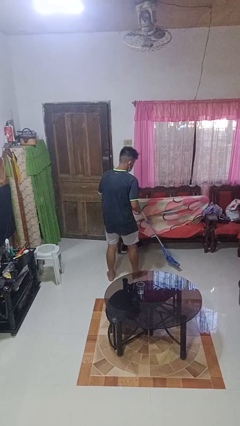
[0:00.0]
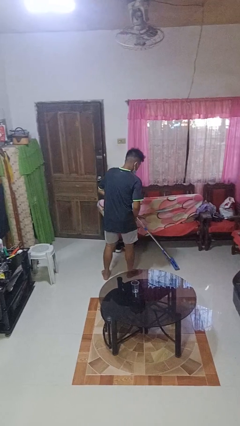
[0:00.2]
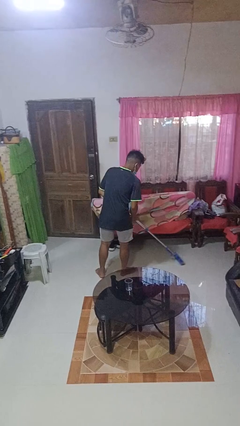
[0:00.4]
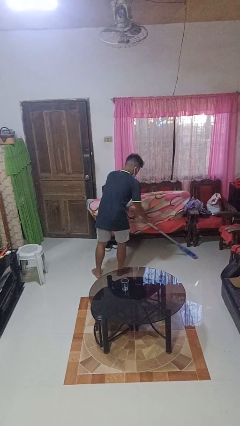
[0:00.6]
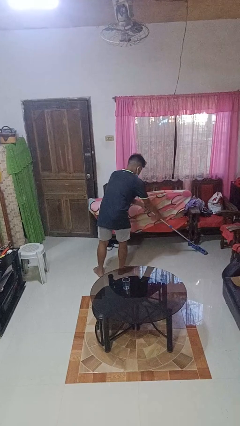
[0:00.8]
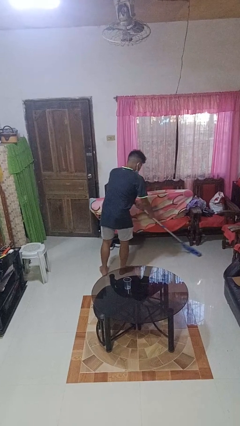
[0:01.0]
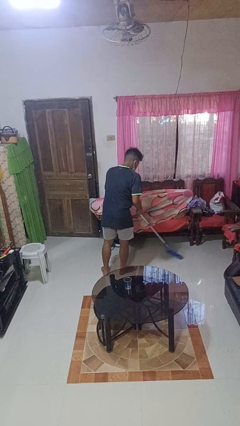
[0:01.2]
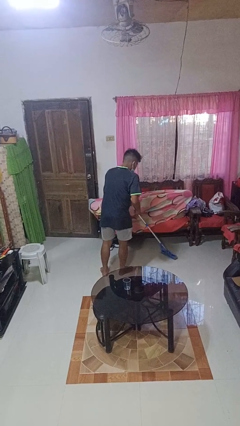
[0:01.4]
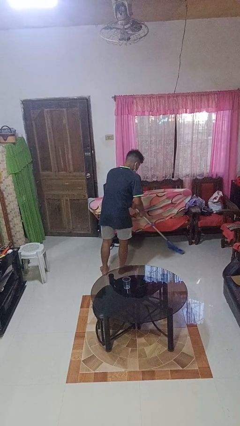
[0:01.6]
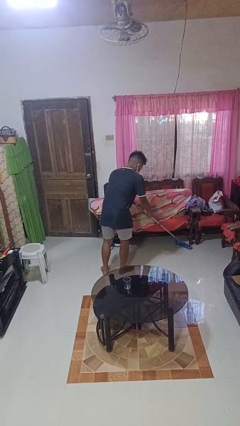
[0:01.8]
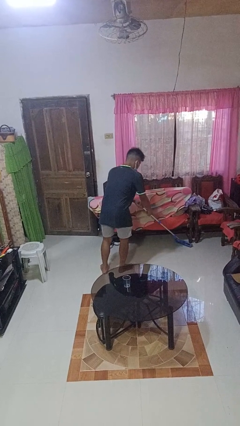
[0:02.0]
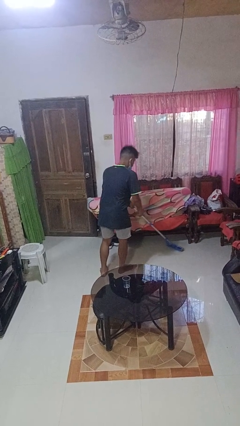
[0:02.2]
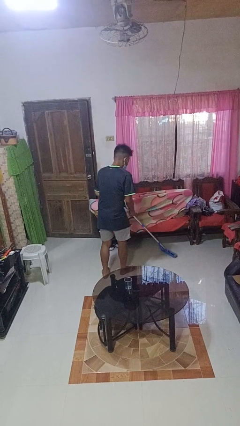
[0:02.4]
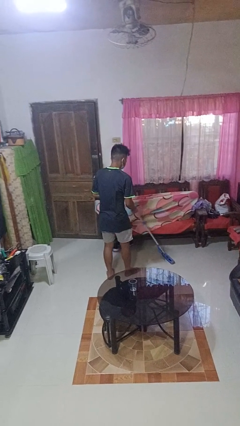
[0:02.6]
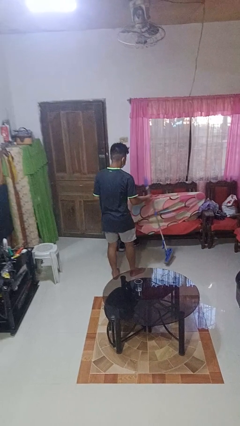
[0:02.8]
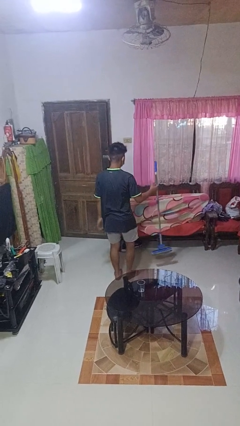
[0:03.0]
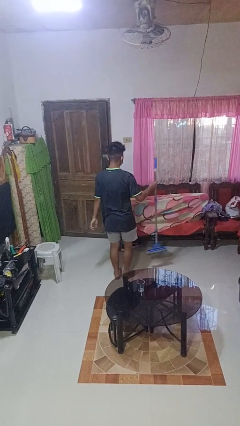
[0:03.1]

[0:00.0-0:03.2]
person mops

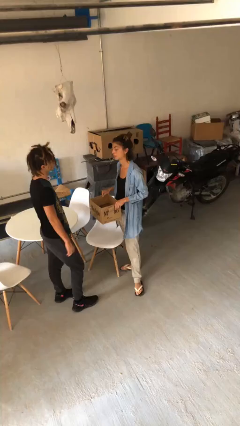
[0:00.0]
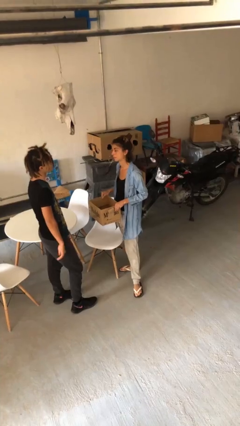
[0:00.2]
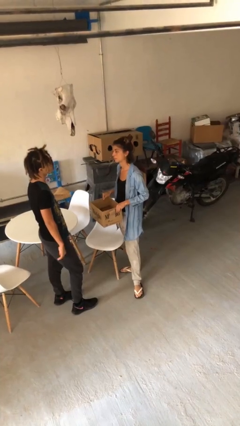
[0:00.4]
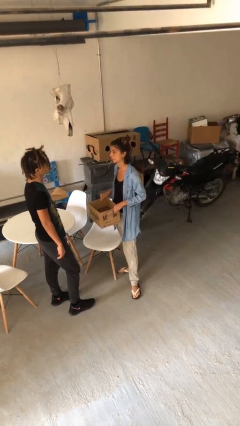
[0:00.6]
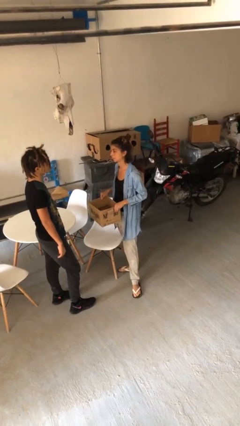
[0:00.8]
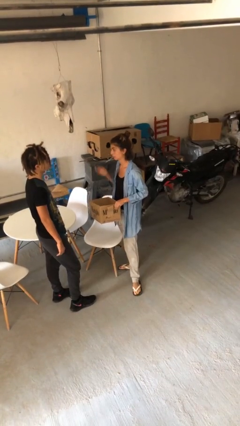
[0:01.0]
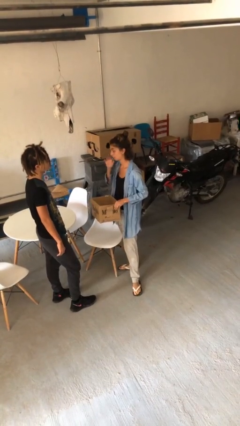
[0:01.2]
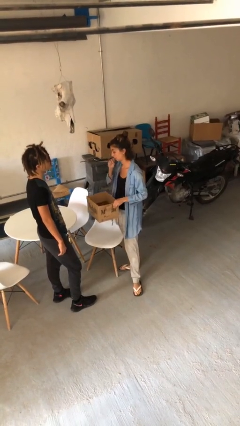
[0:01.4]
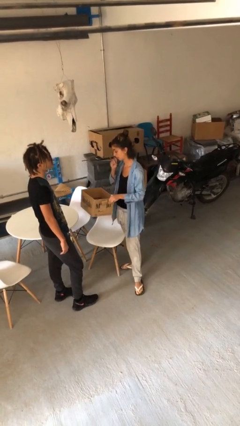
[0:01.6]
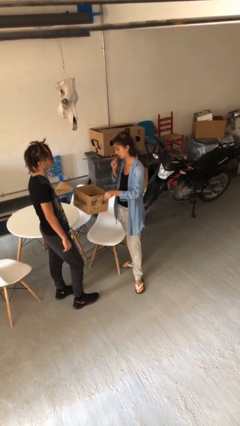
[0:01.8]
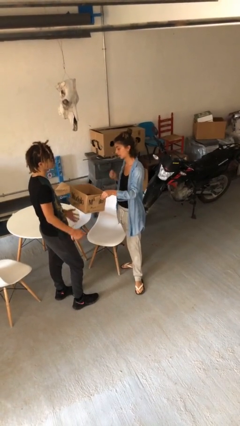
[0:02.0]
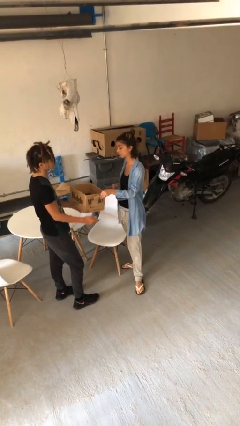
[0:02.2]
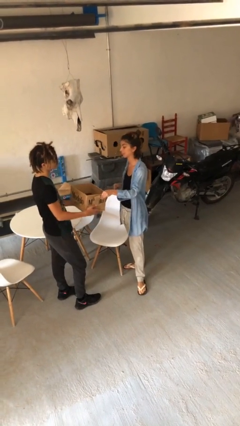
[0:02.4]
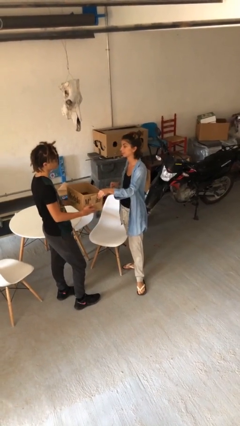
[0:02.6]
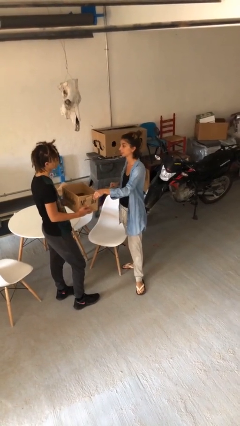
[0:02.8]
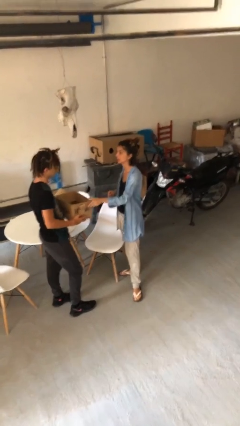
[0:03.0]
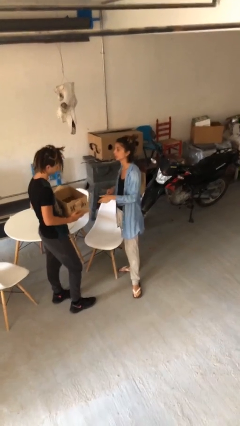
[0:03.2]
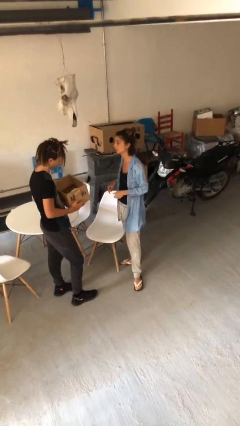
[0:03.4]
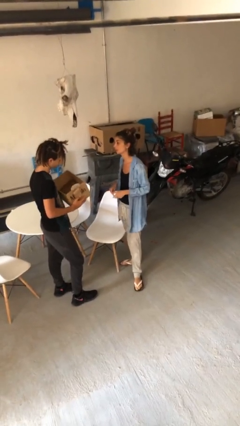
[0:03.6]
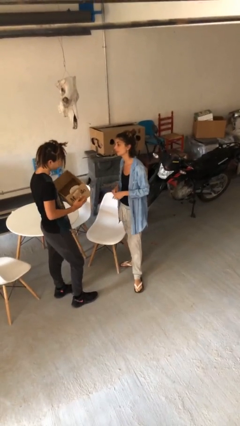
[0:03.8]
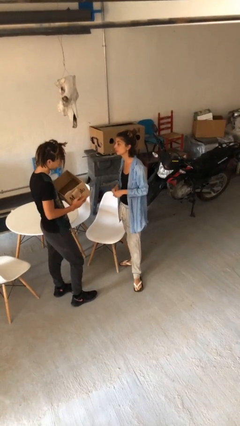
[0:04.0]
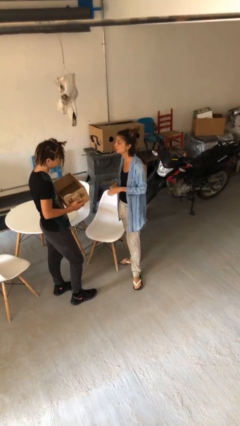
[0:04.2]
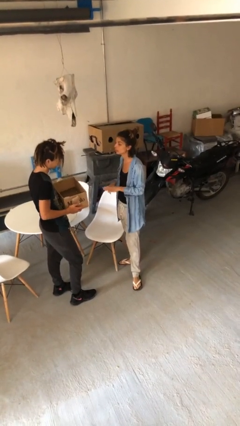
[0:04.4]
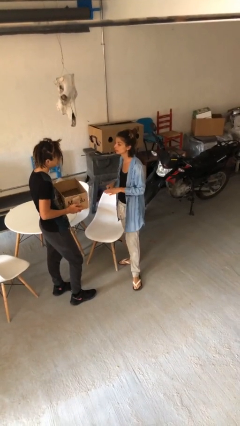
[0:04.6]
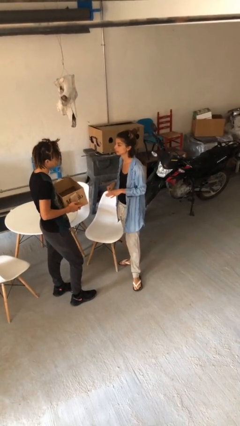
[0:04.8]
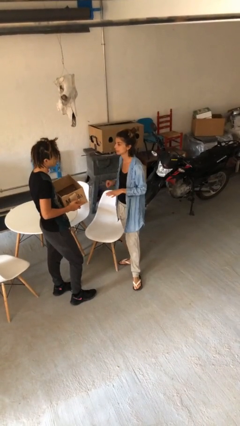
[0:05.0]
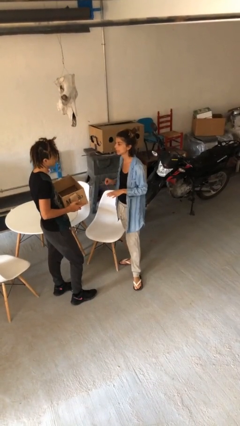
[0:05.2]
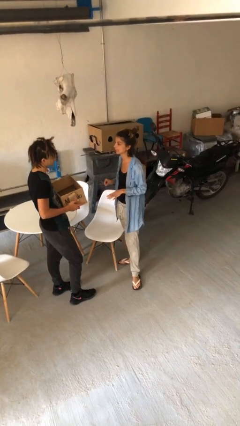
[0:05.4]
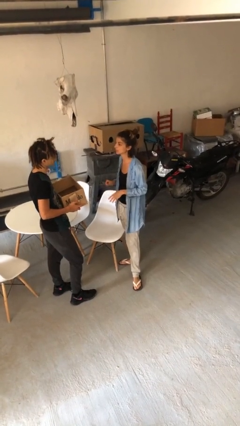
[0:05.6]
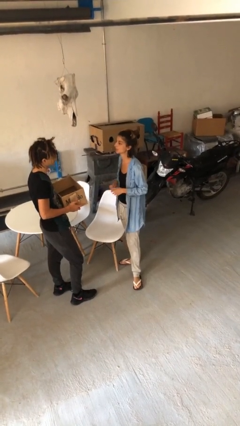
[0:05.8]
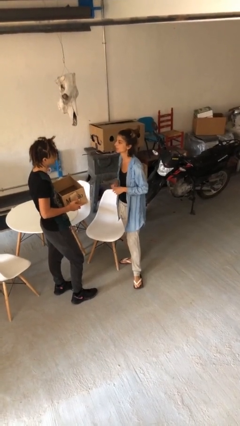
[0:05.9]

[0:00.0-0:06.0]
person transfers object to person

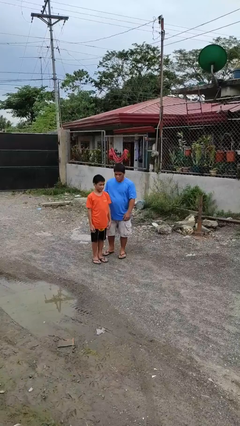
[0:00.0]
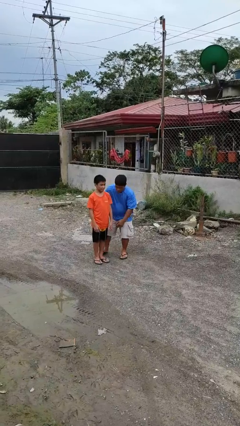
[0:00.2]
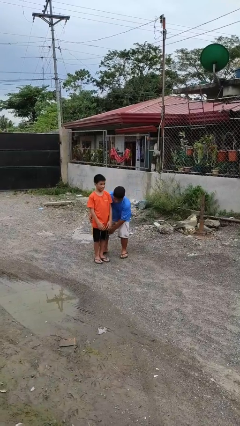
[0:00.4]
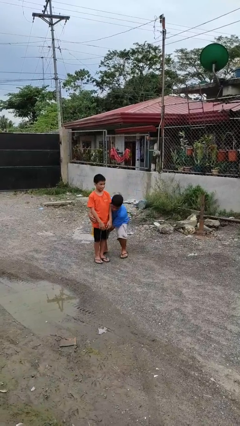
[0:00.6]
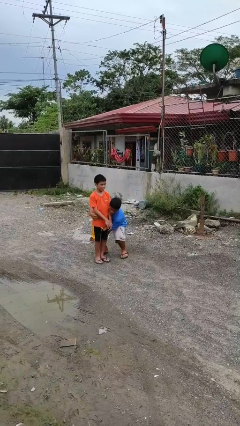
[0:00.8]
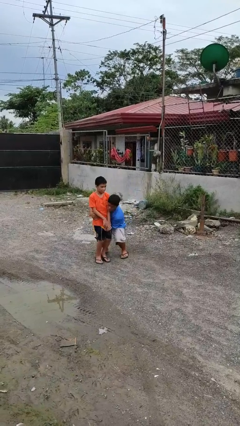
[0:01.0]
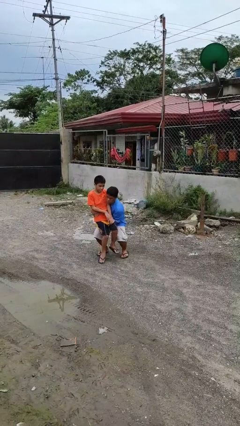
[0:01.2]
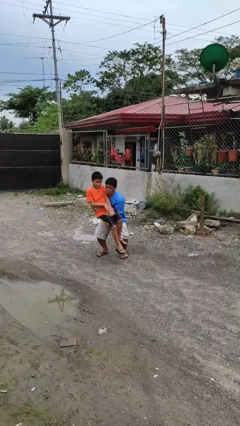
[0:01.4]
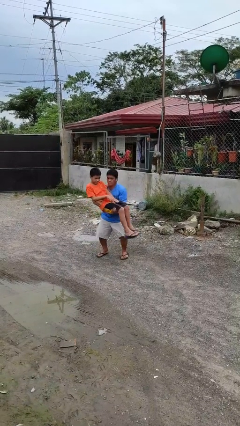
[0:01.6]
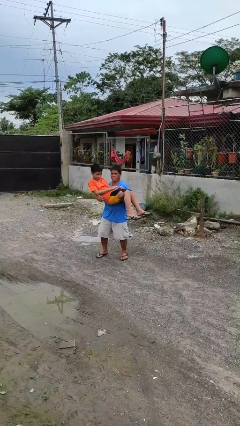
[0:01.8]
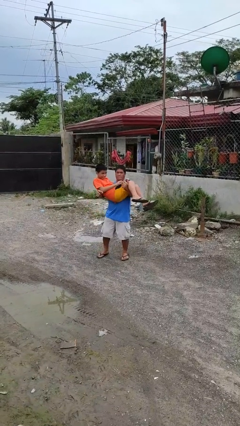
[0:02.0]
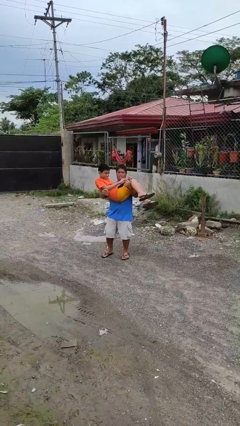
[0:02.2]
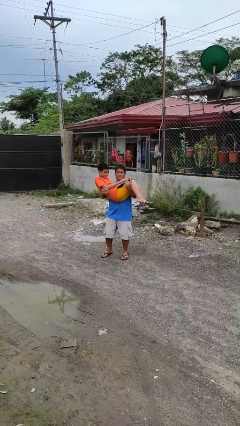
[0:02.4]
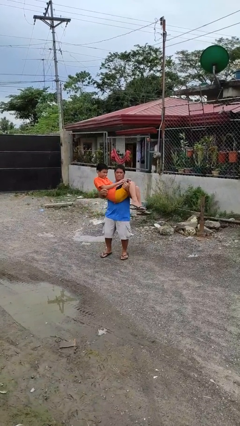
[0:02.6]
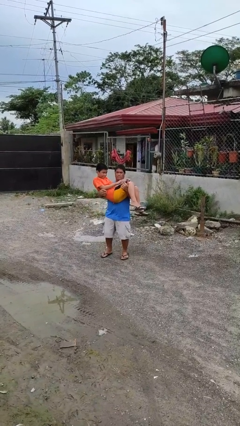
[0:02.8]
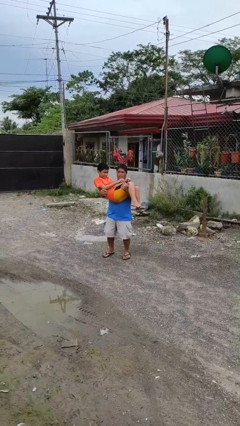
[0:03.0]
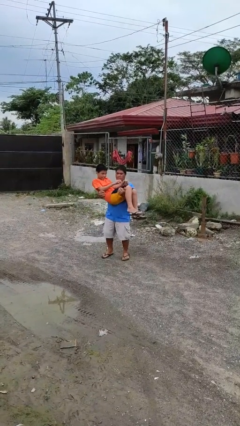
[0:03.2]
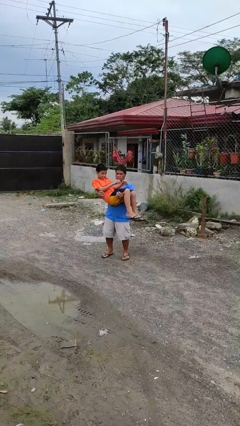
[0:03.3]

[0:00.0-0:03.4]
person picks up person

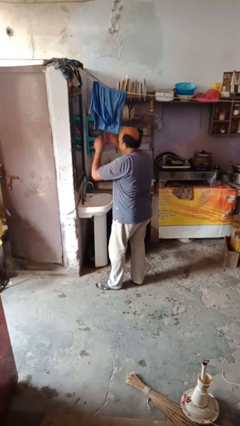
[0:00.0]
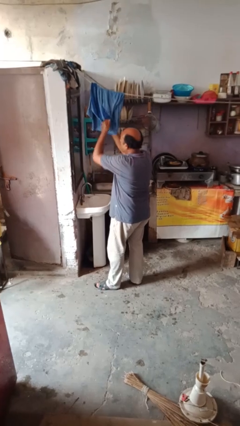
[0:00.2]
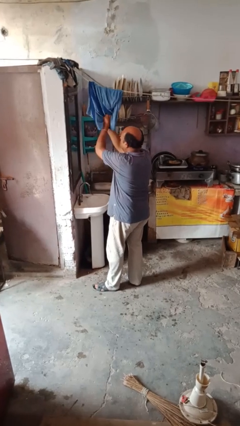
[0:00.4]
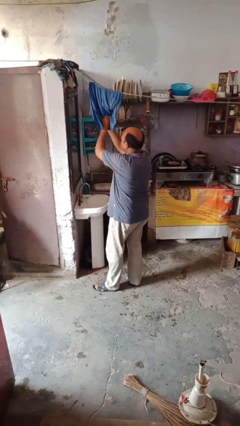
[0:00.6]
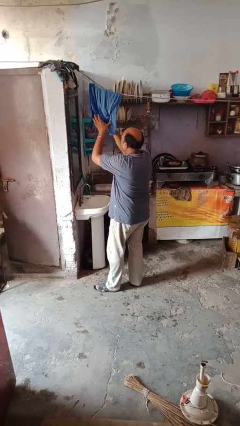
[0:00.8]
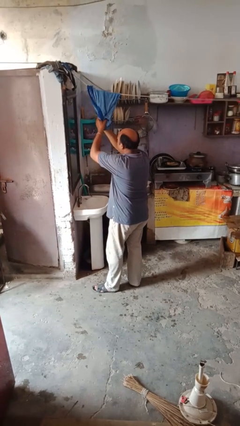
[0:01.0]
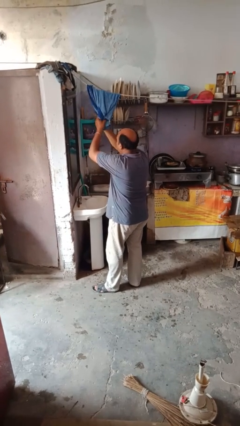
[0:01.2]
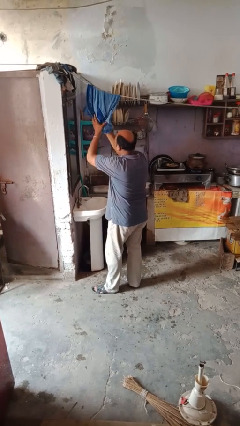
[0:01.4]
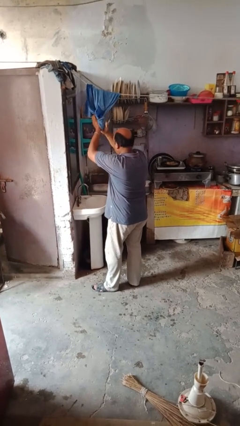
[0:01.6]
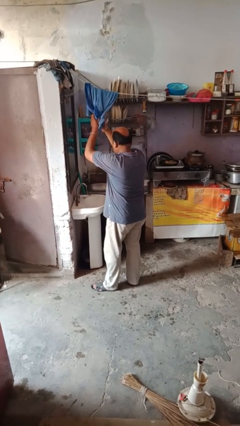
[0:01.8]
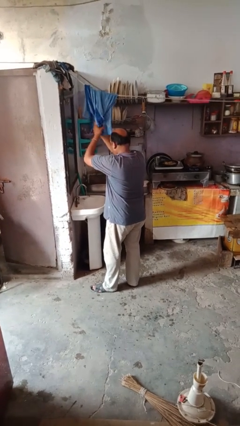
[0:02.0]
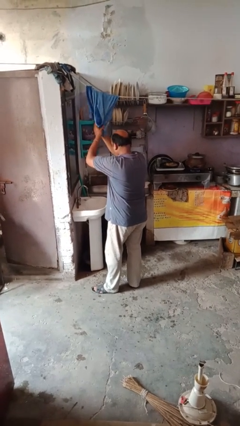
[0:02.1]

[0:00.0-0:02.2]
person dries hands with towel

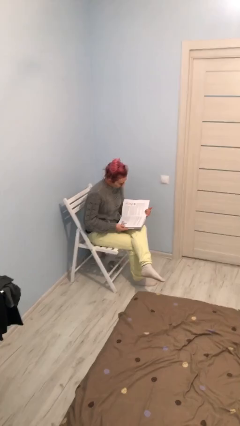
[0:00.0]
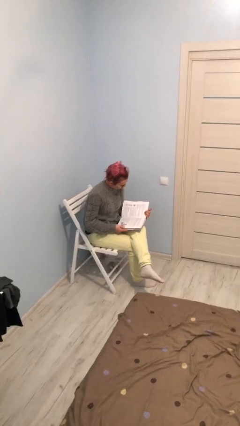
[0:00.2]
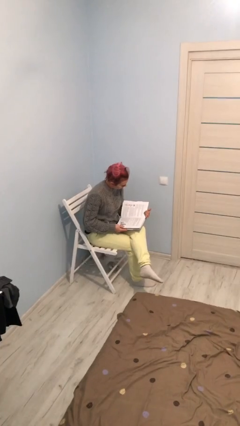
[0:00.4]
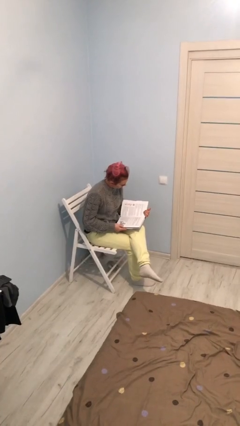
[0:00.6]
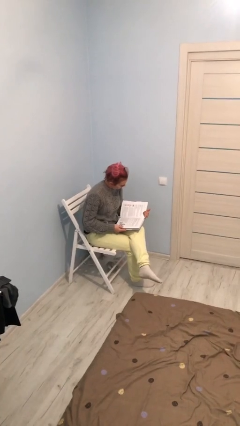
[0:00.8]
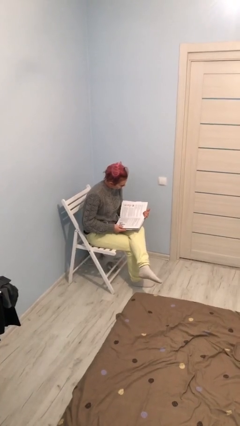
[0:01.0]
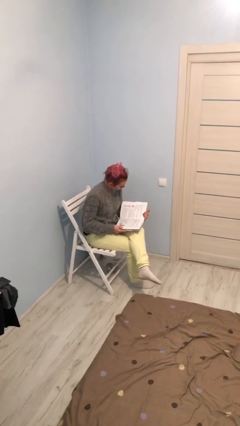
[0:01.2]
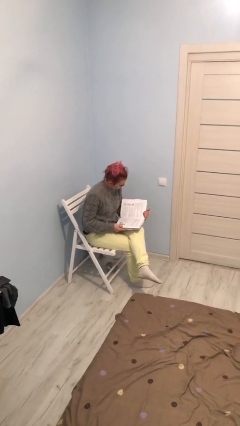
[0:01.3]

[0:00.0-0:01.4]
person reads document

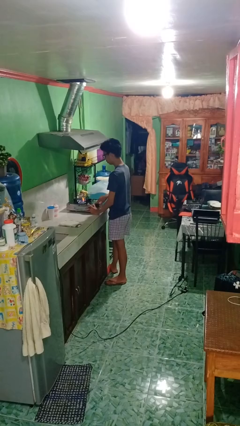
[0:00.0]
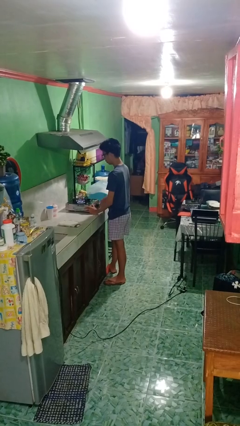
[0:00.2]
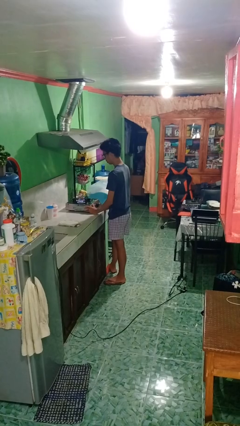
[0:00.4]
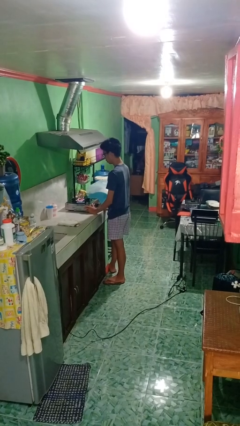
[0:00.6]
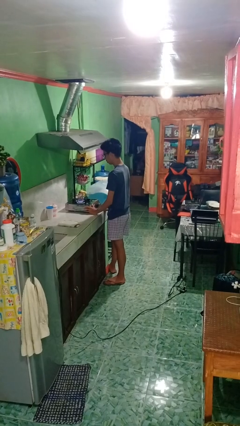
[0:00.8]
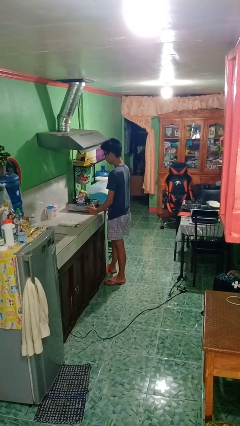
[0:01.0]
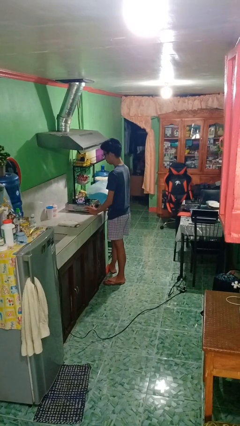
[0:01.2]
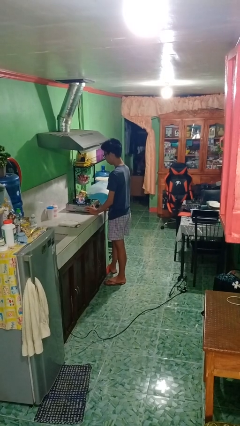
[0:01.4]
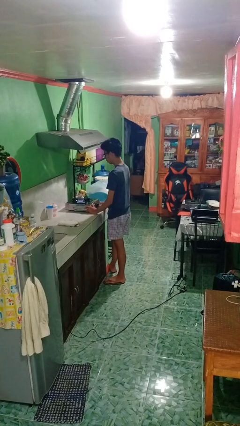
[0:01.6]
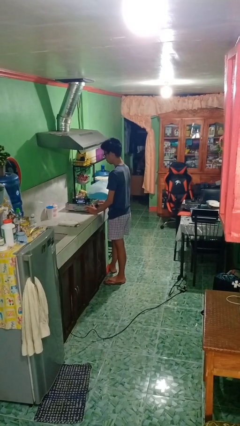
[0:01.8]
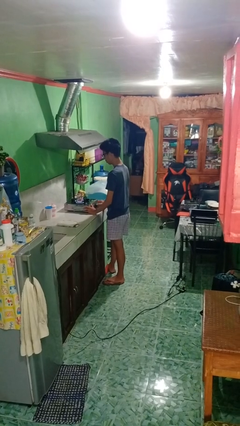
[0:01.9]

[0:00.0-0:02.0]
person turns on stovetop
